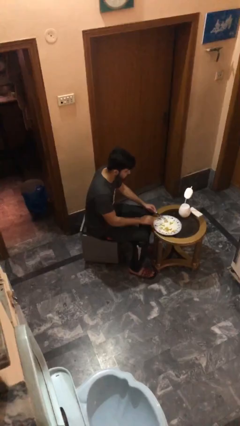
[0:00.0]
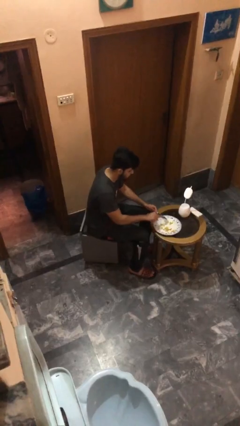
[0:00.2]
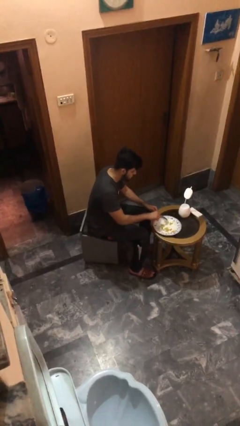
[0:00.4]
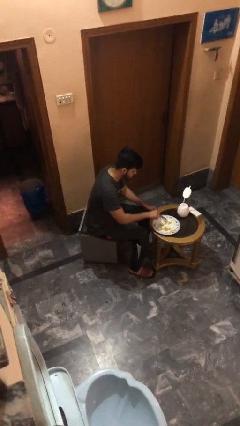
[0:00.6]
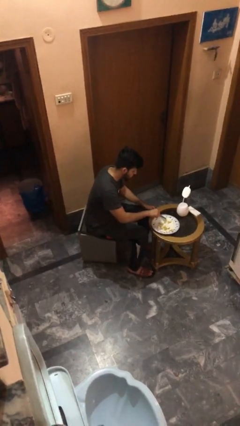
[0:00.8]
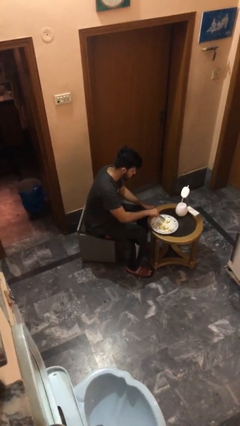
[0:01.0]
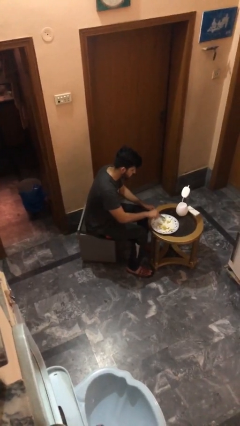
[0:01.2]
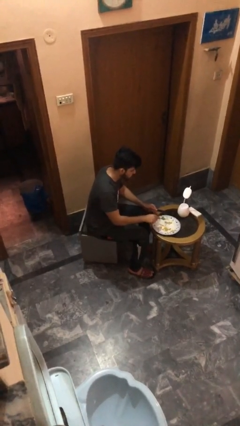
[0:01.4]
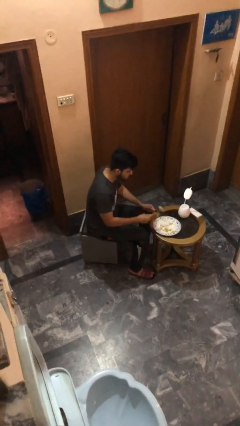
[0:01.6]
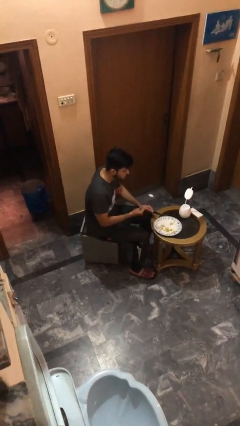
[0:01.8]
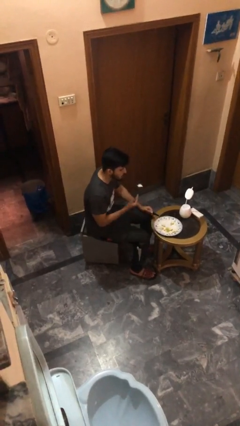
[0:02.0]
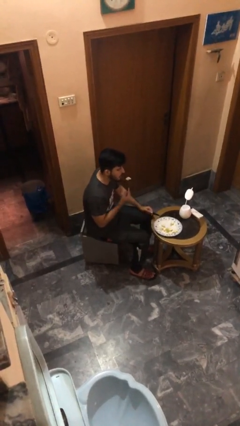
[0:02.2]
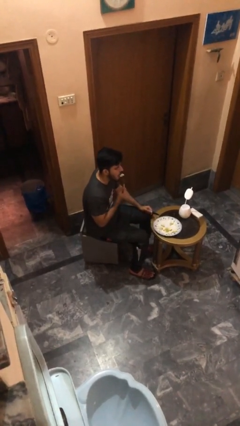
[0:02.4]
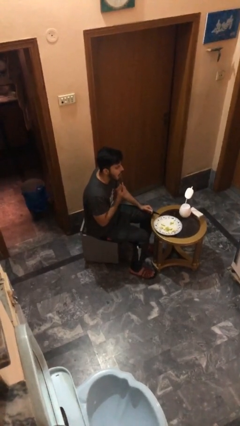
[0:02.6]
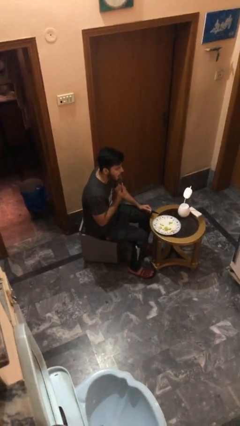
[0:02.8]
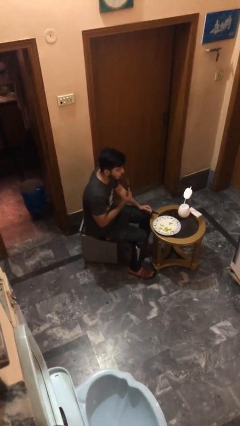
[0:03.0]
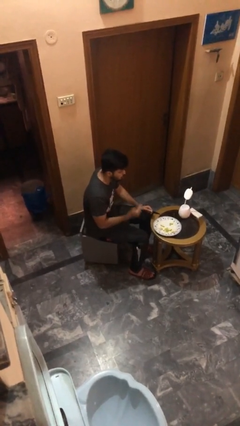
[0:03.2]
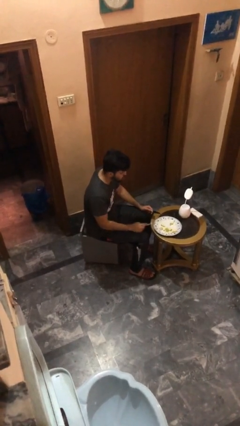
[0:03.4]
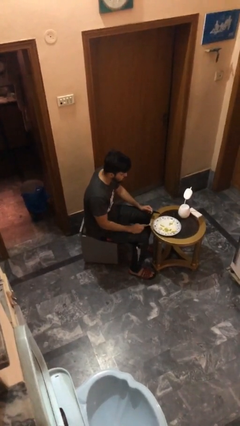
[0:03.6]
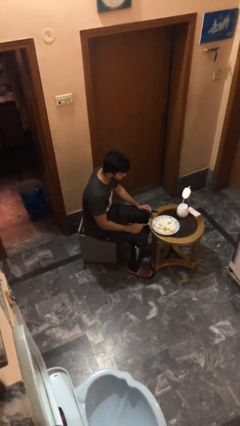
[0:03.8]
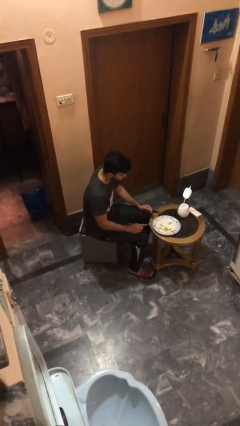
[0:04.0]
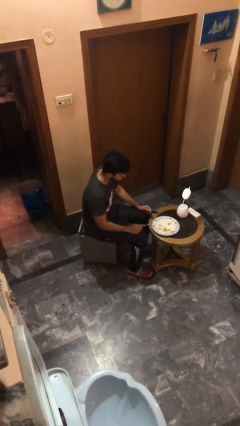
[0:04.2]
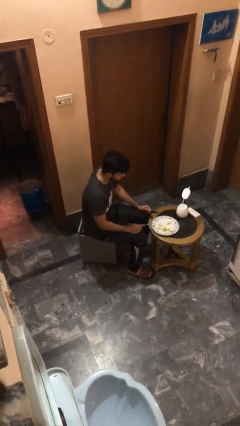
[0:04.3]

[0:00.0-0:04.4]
person eats with utensil

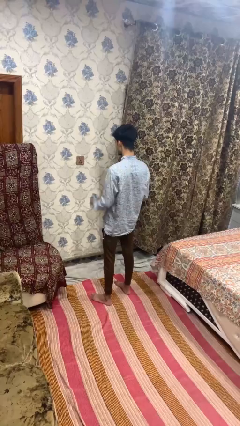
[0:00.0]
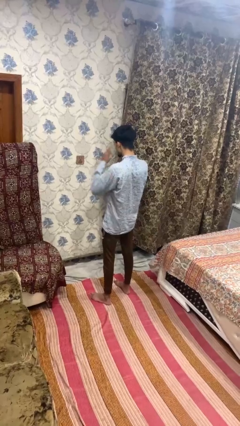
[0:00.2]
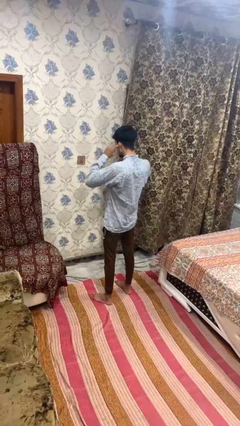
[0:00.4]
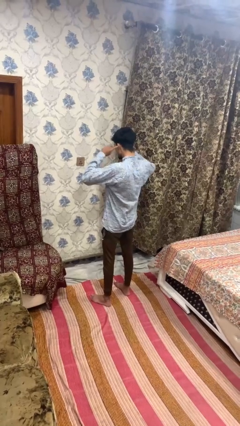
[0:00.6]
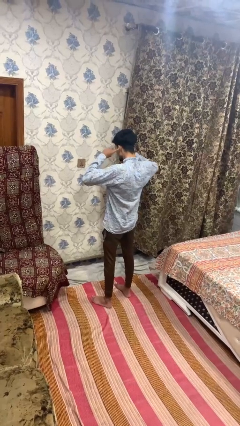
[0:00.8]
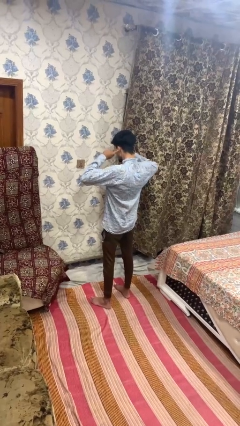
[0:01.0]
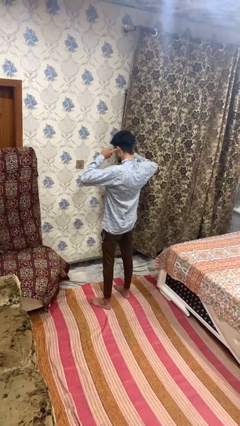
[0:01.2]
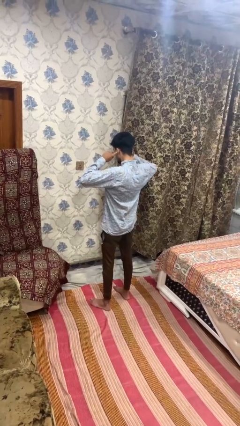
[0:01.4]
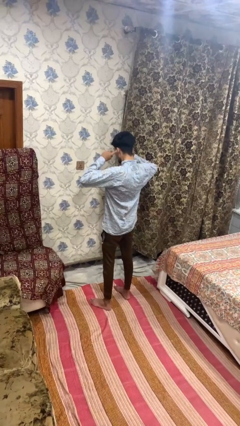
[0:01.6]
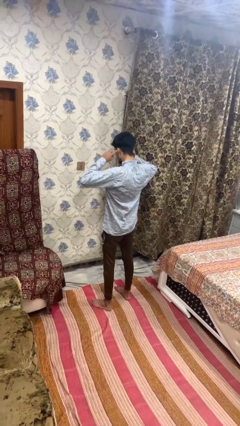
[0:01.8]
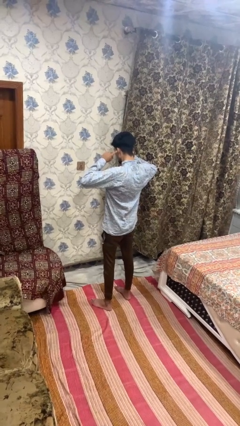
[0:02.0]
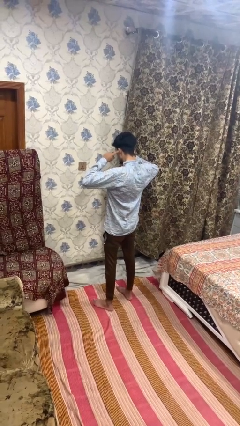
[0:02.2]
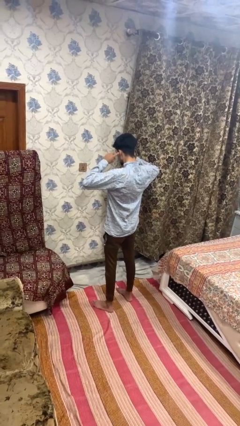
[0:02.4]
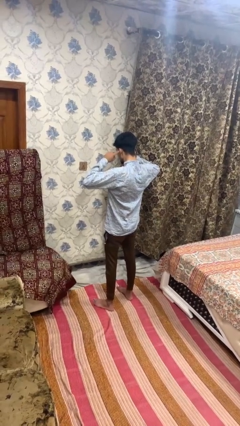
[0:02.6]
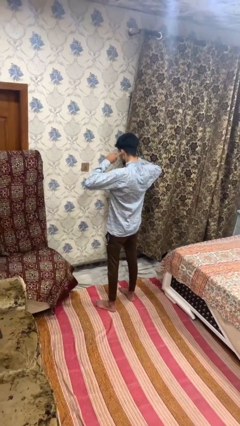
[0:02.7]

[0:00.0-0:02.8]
person puts fingers in ear

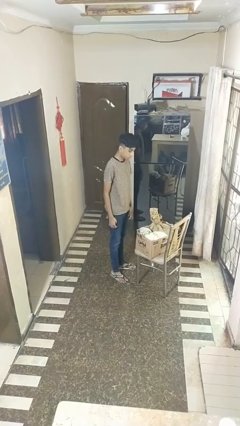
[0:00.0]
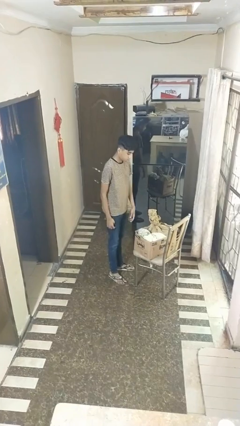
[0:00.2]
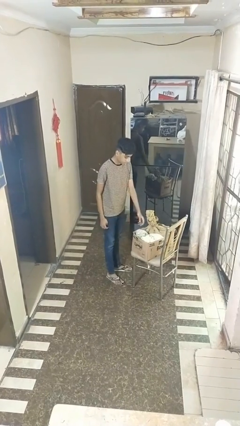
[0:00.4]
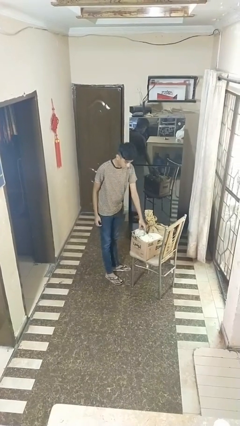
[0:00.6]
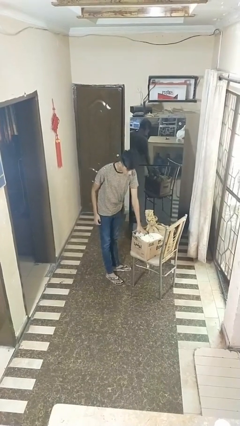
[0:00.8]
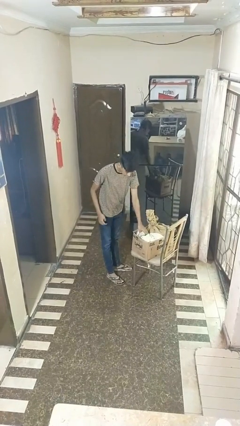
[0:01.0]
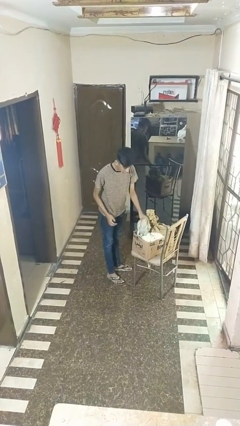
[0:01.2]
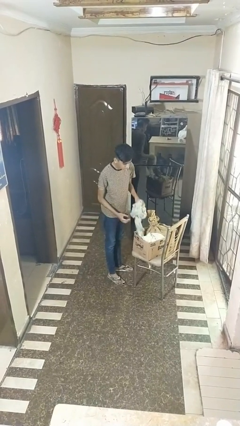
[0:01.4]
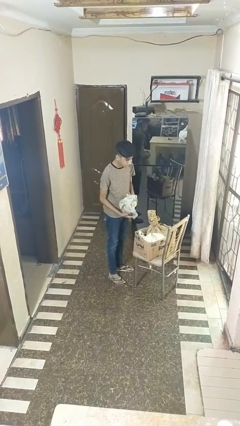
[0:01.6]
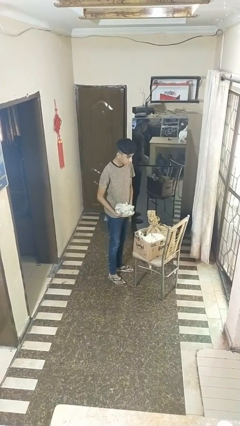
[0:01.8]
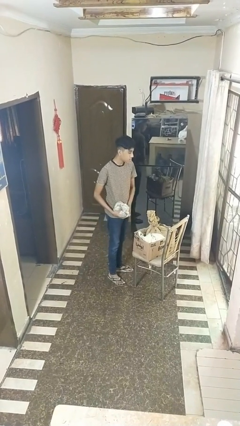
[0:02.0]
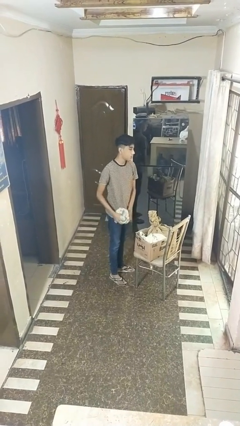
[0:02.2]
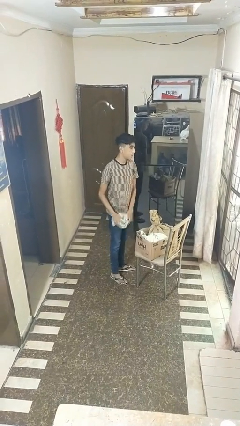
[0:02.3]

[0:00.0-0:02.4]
person takes object from box

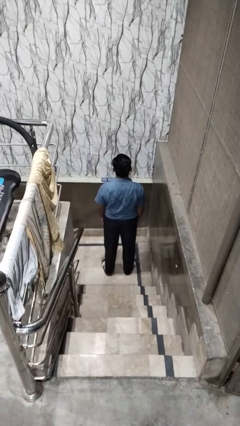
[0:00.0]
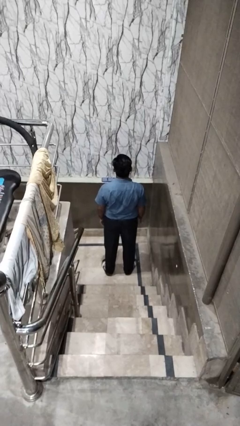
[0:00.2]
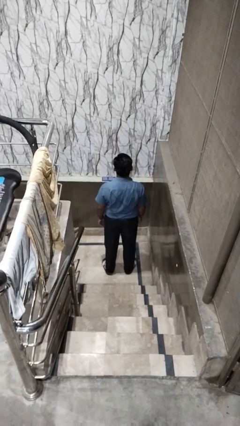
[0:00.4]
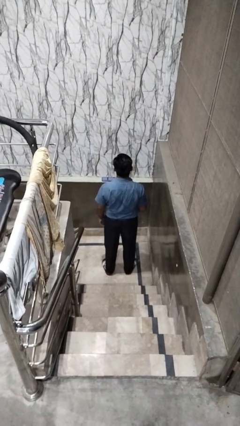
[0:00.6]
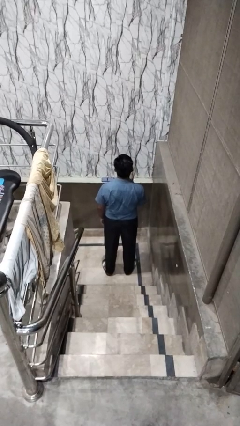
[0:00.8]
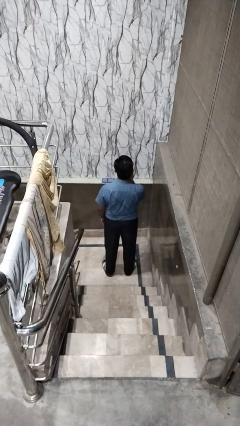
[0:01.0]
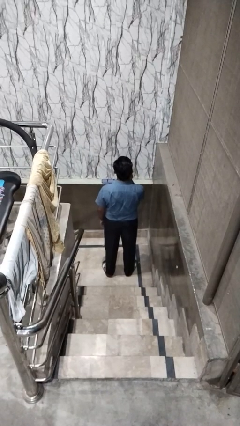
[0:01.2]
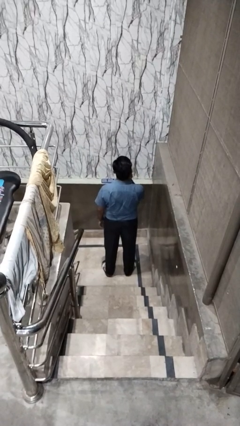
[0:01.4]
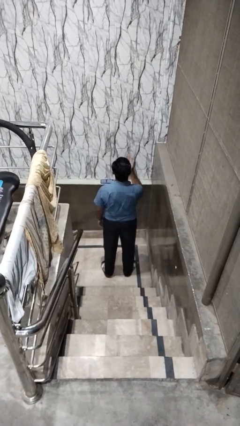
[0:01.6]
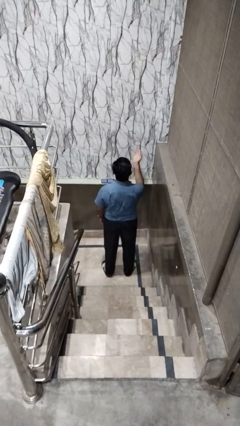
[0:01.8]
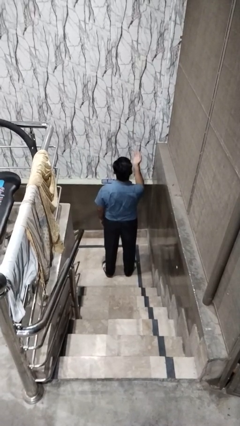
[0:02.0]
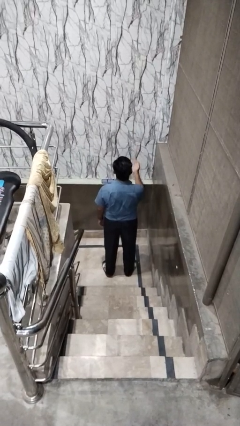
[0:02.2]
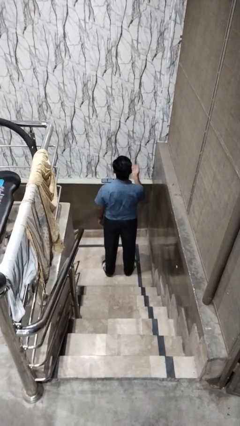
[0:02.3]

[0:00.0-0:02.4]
person gestures blow kiss

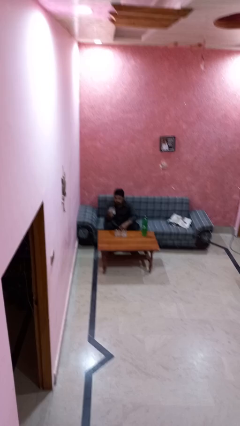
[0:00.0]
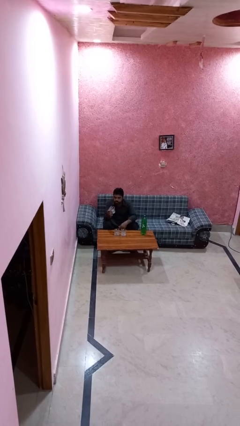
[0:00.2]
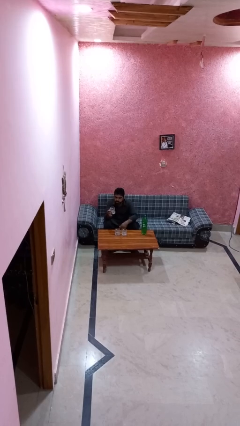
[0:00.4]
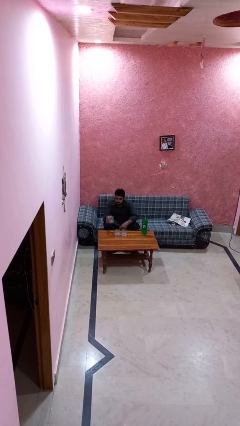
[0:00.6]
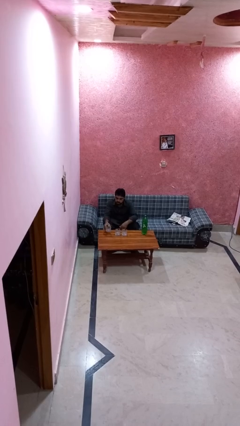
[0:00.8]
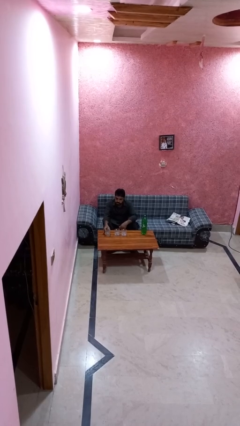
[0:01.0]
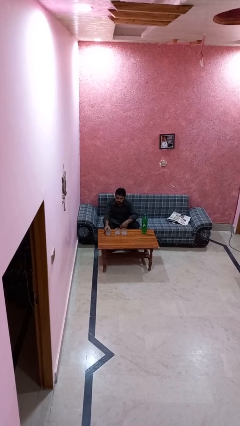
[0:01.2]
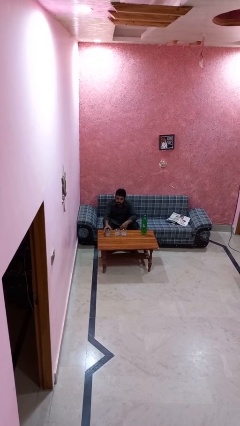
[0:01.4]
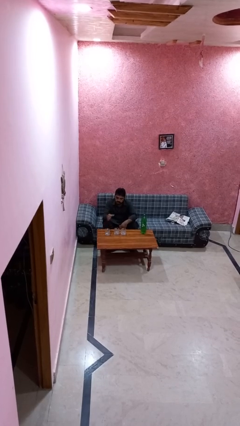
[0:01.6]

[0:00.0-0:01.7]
person puts down object on table

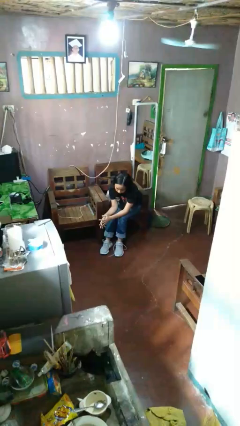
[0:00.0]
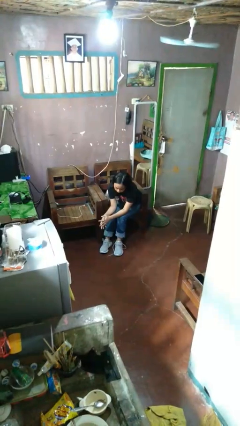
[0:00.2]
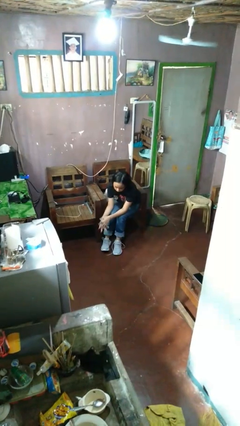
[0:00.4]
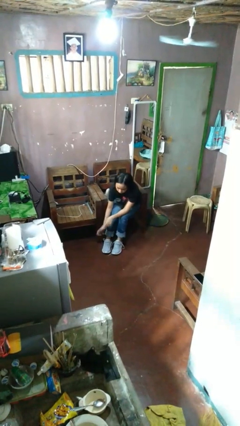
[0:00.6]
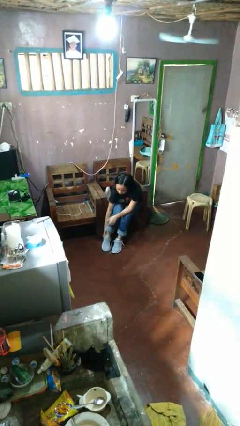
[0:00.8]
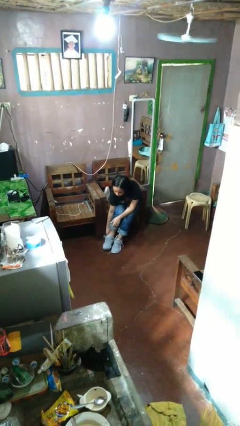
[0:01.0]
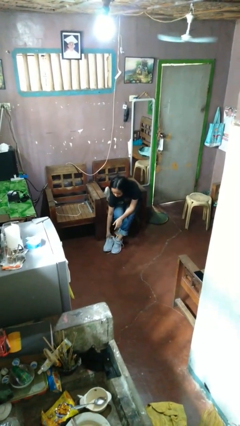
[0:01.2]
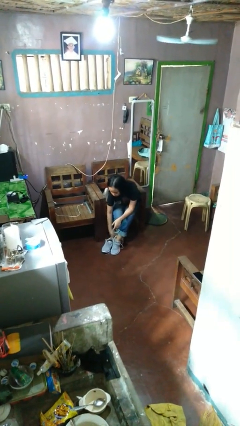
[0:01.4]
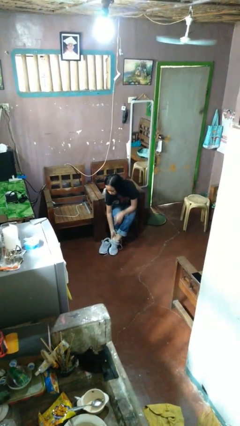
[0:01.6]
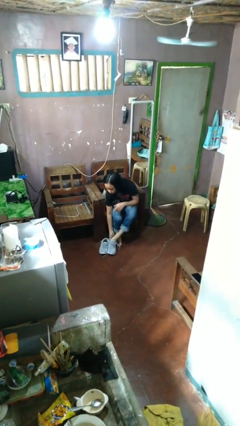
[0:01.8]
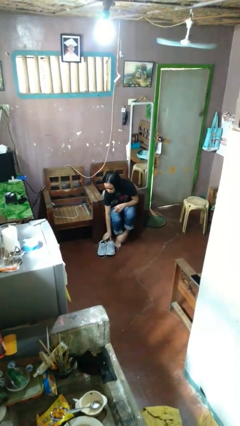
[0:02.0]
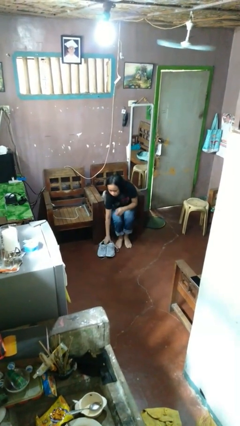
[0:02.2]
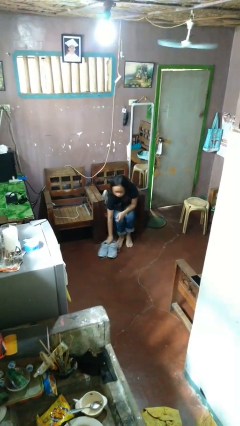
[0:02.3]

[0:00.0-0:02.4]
person takes off shoes

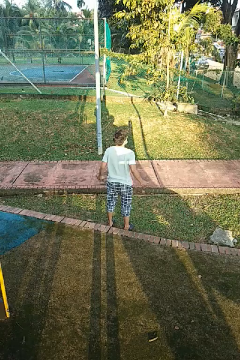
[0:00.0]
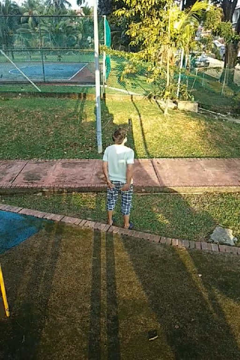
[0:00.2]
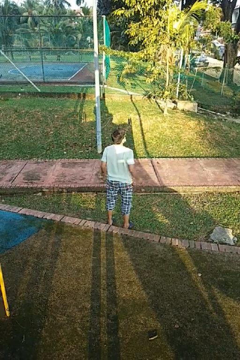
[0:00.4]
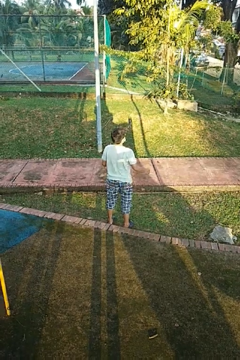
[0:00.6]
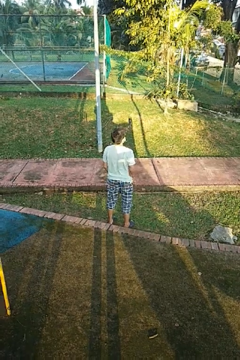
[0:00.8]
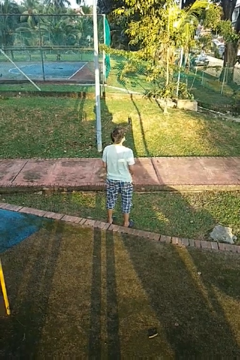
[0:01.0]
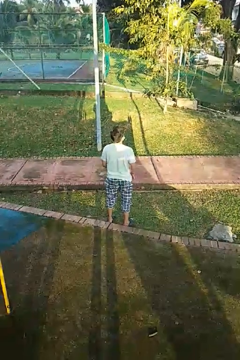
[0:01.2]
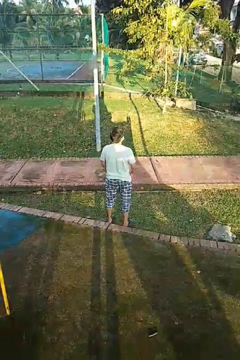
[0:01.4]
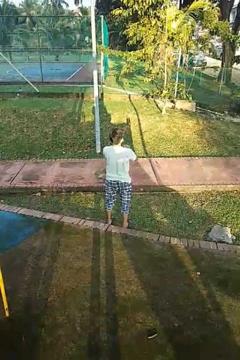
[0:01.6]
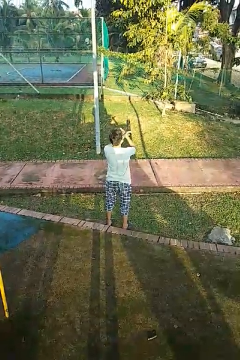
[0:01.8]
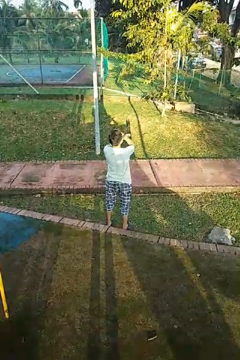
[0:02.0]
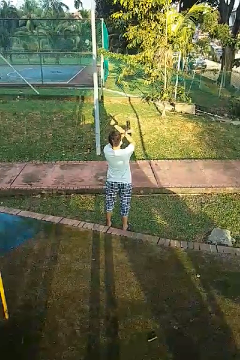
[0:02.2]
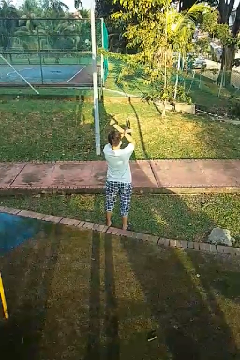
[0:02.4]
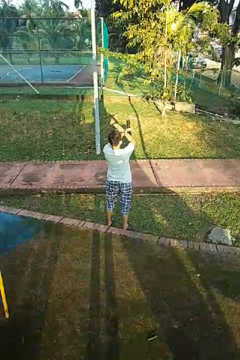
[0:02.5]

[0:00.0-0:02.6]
person gestures arms x
